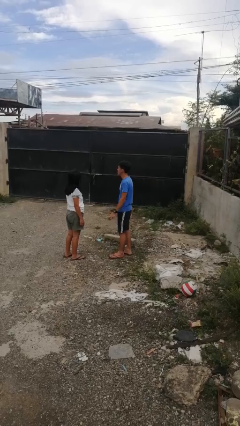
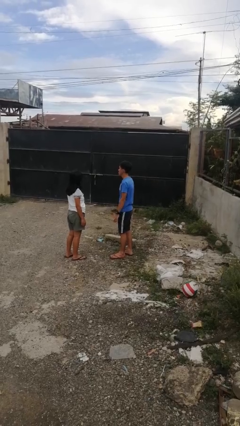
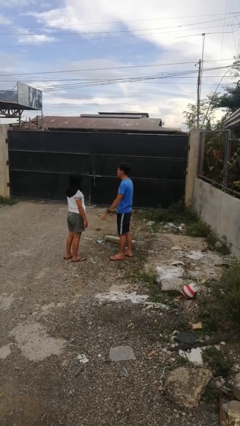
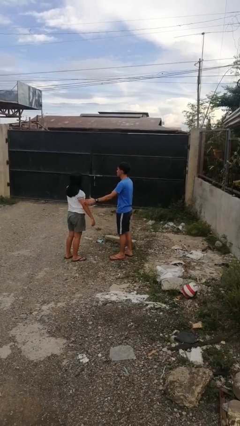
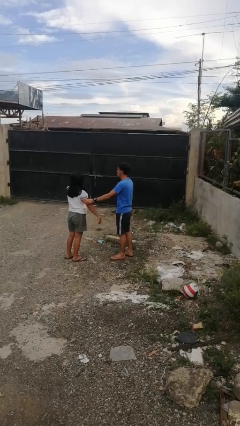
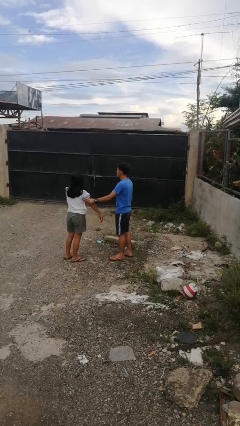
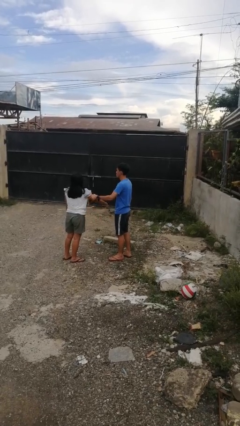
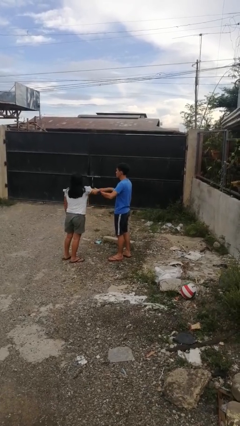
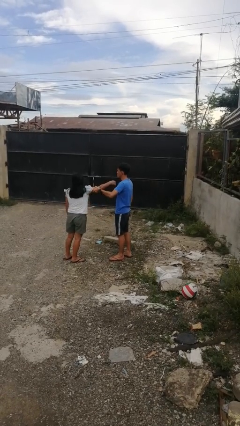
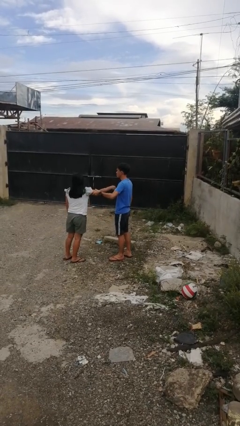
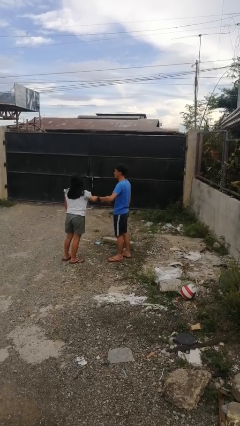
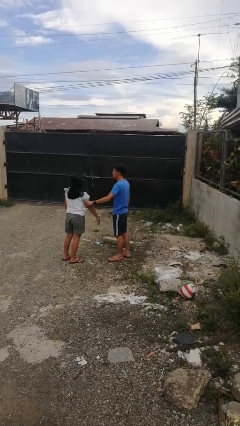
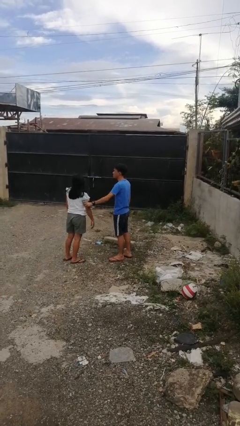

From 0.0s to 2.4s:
person grabs person by bicep

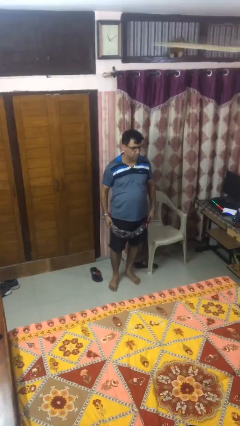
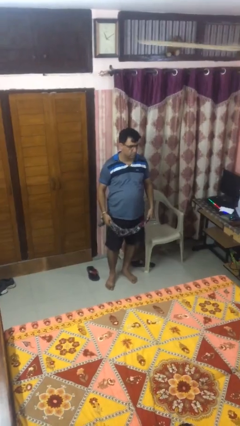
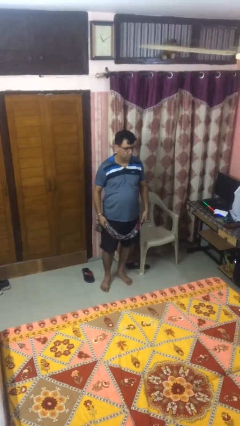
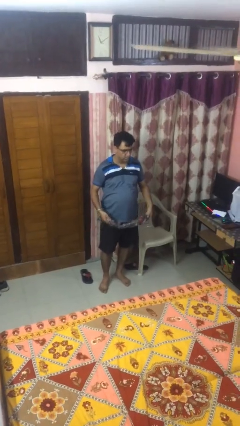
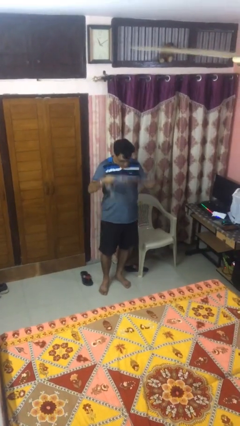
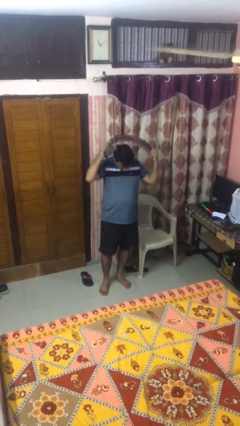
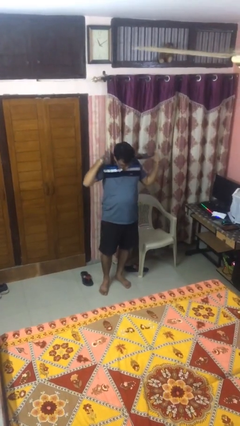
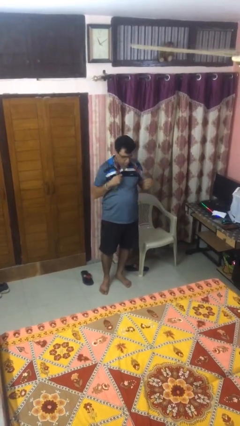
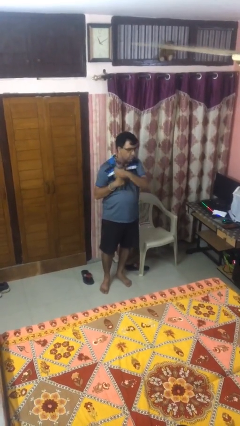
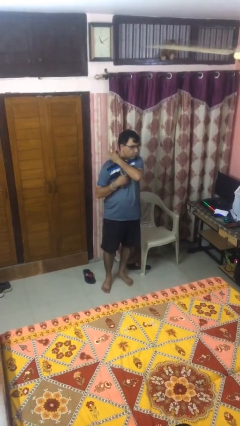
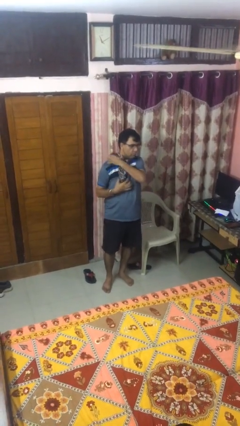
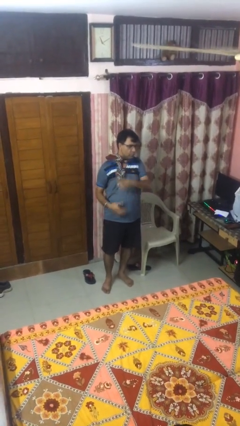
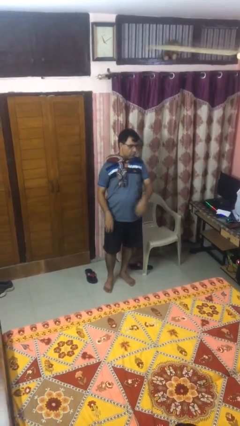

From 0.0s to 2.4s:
person puts on scarf

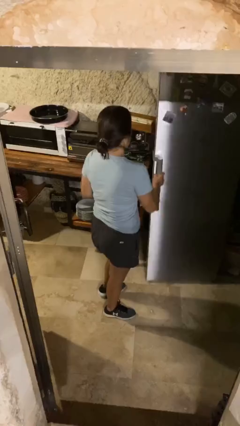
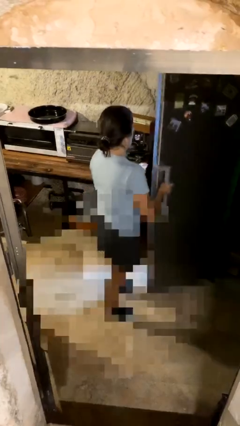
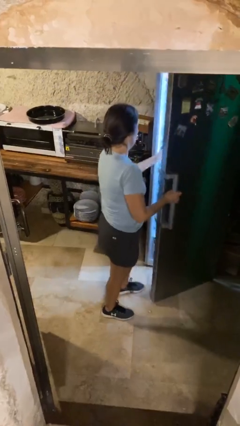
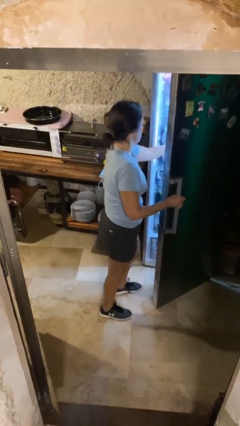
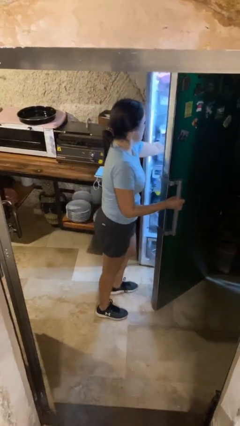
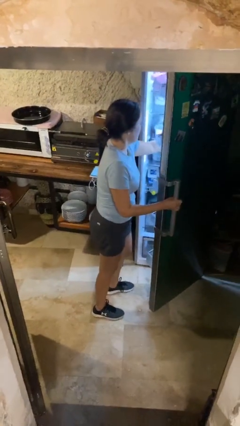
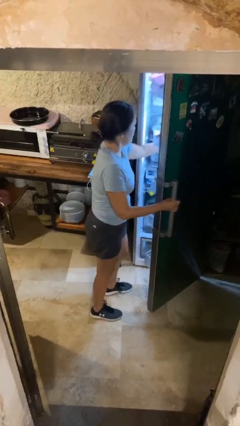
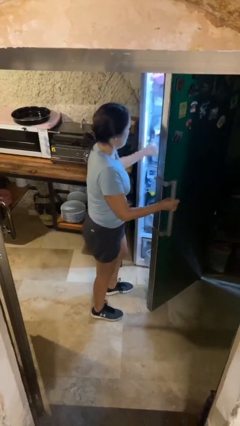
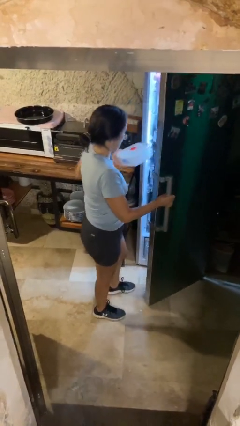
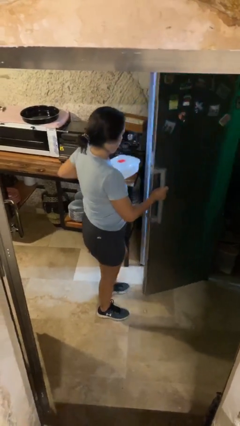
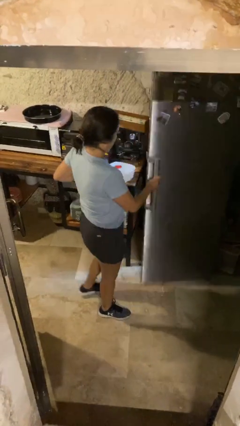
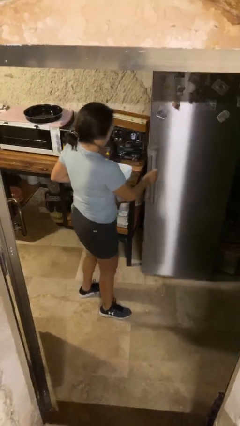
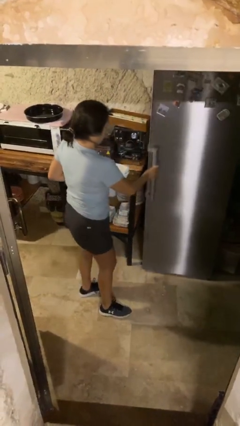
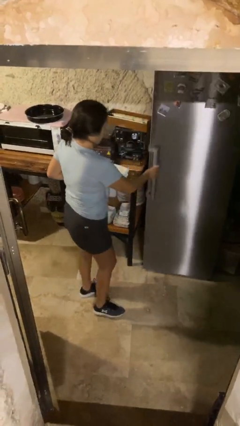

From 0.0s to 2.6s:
person takes object from refrigerator

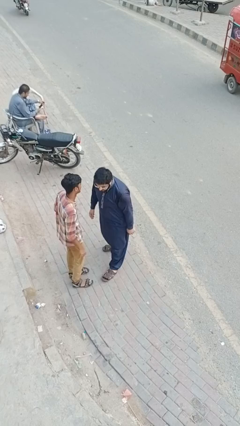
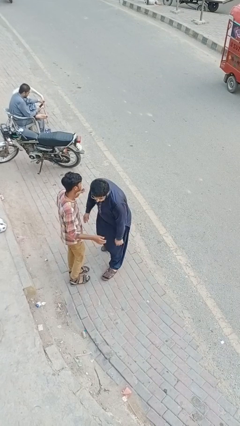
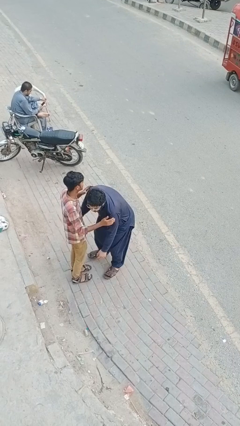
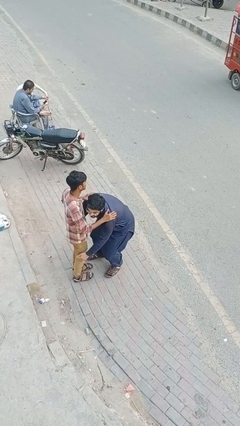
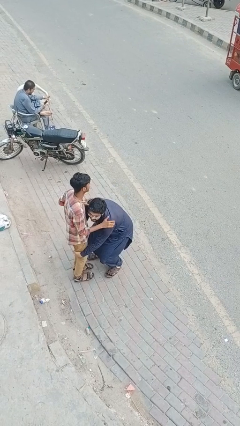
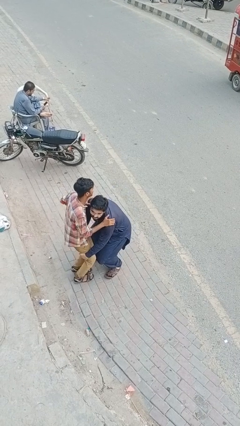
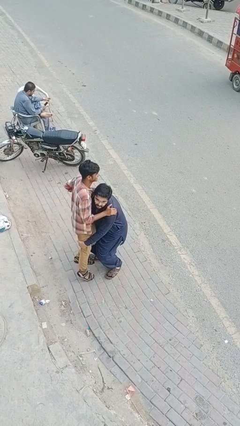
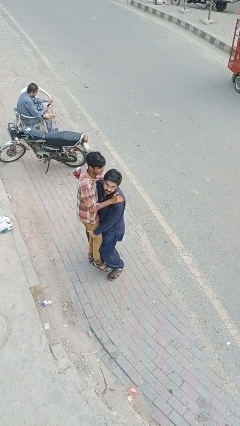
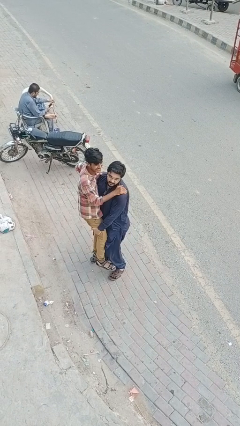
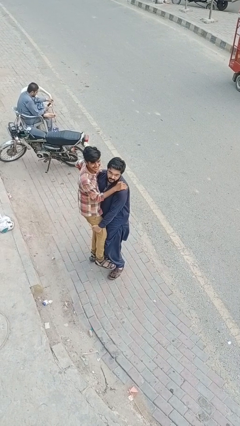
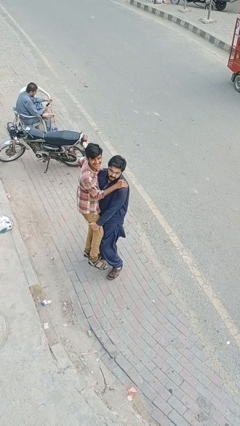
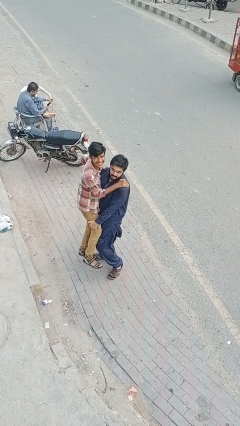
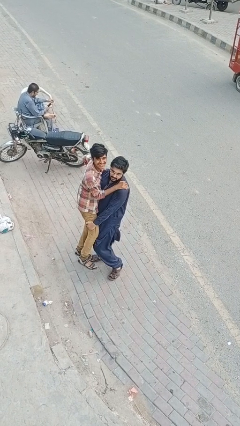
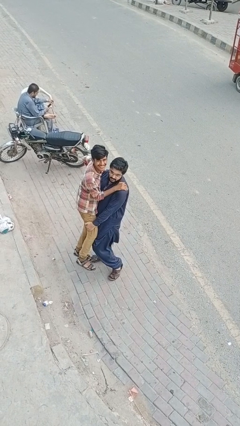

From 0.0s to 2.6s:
person picks up person

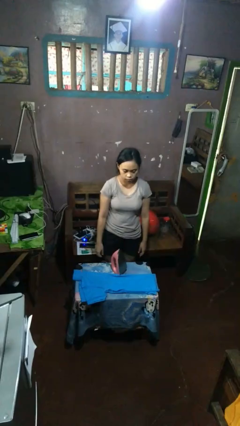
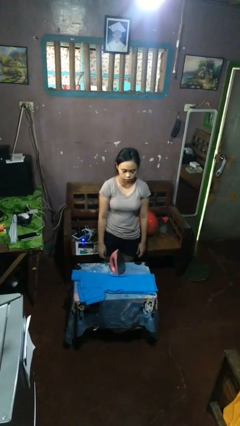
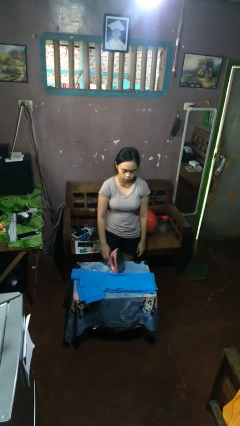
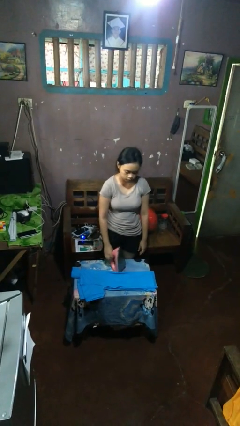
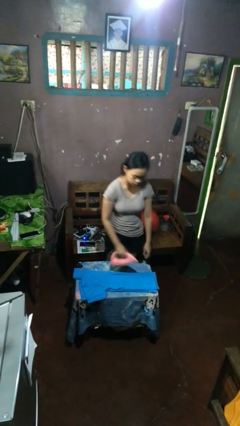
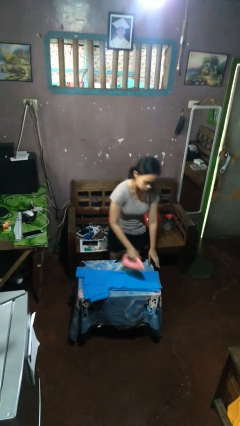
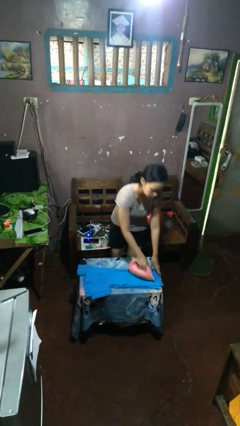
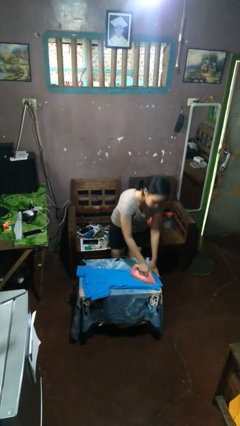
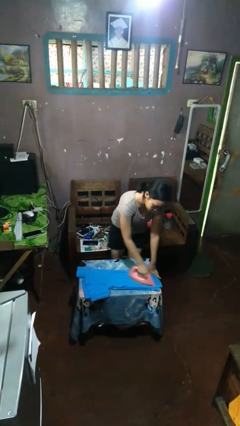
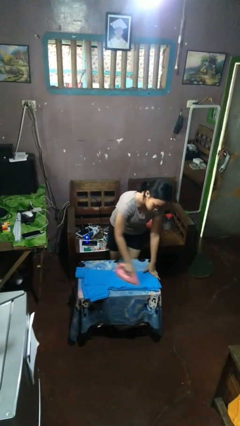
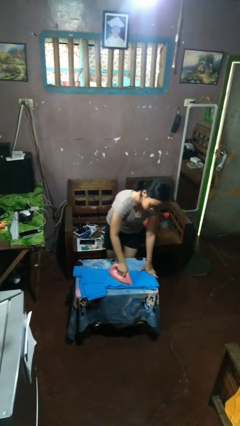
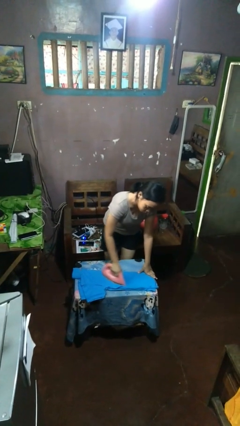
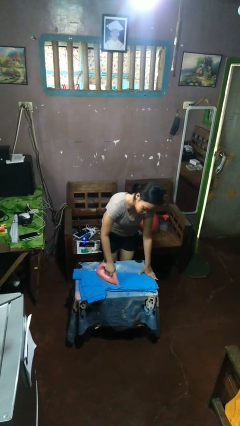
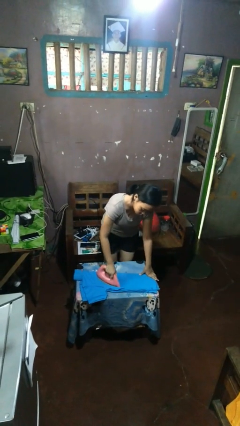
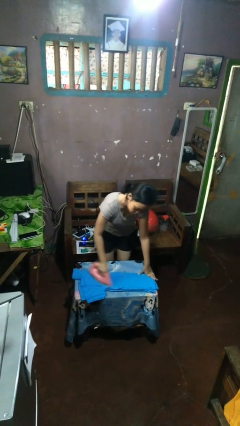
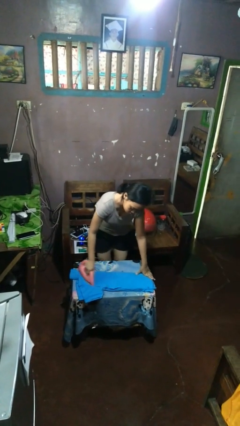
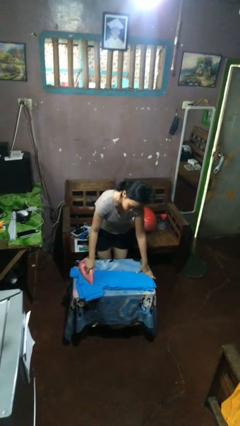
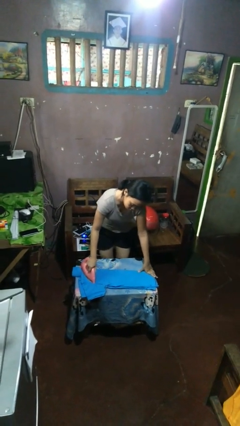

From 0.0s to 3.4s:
person irons clothes

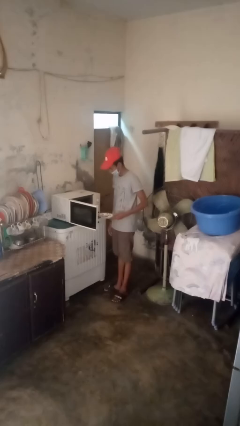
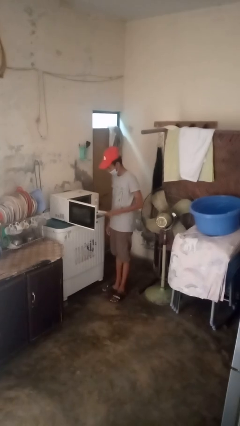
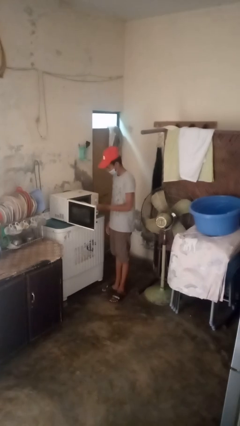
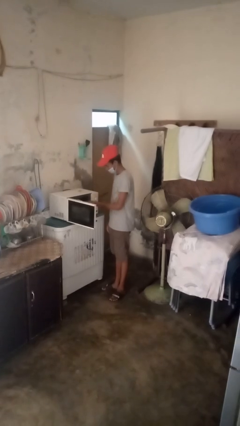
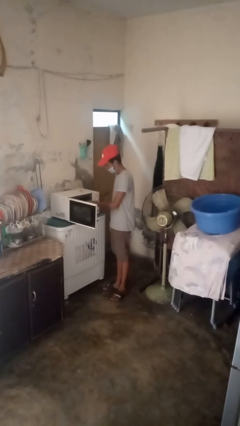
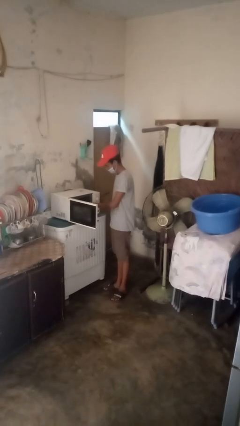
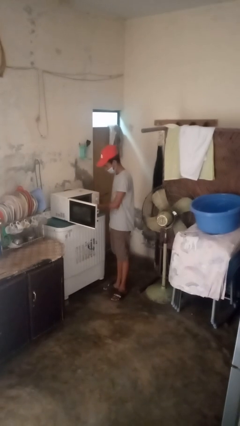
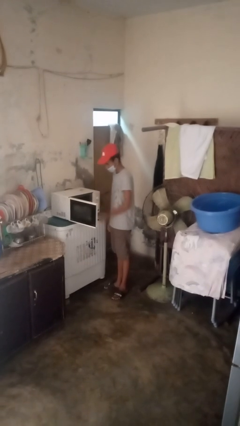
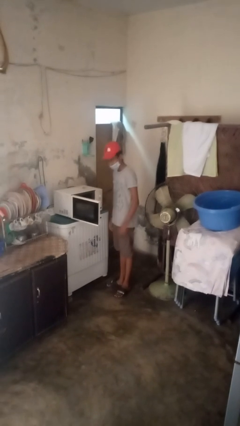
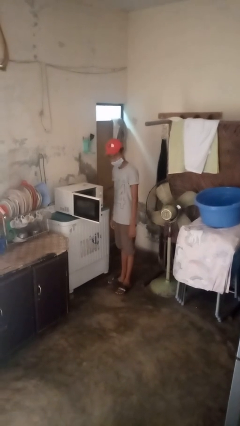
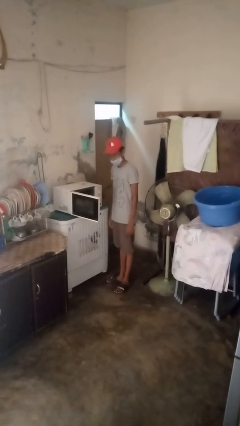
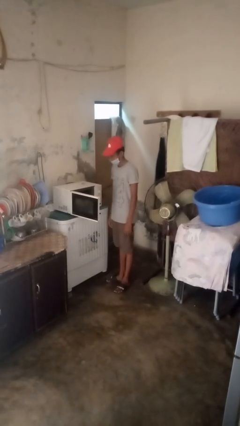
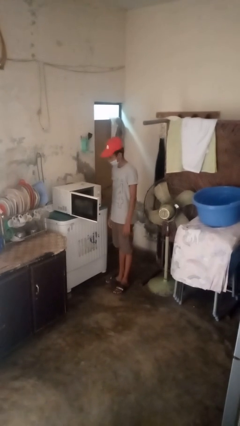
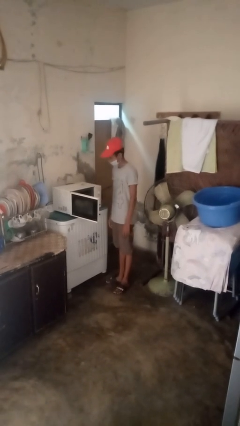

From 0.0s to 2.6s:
person puts object into microwave

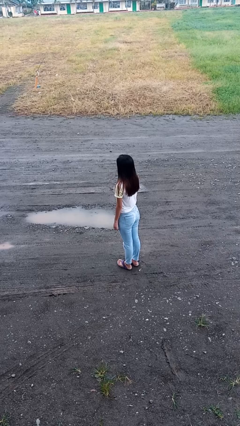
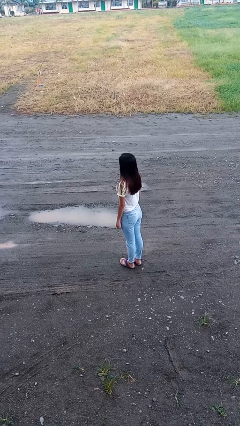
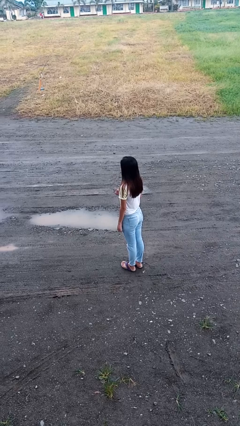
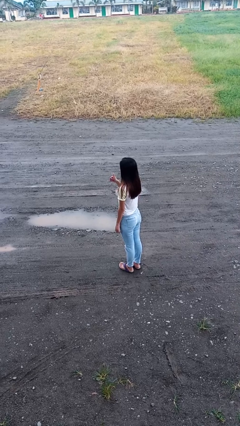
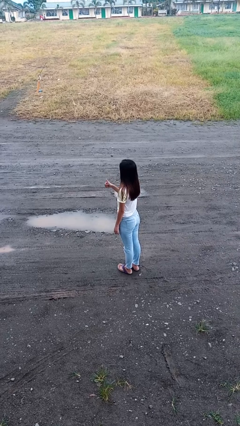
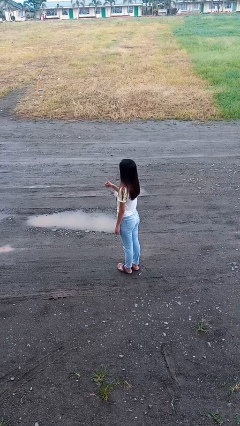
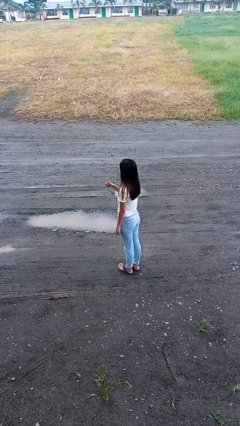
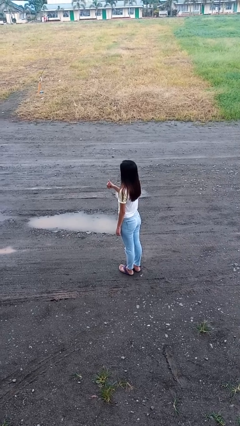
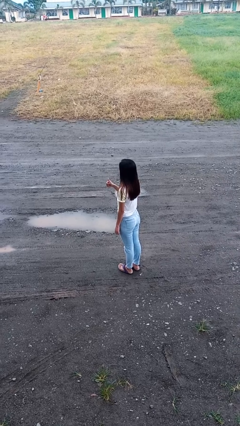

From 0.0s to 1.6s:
person gestures thumbs up
